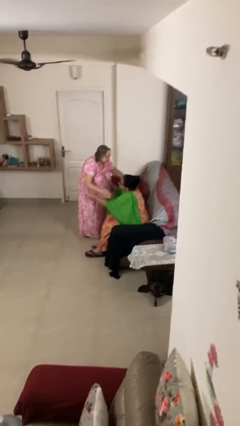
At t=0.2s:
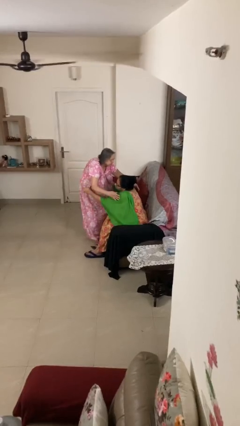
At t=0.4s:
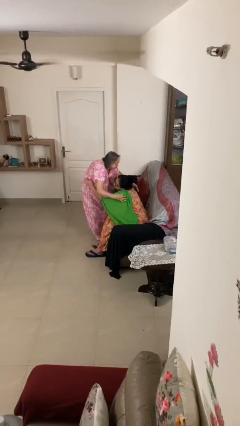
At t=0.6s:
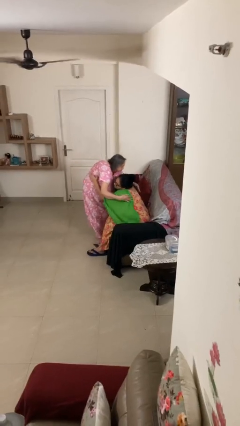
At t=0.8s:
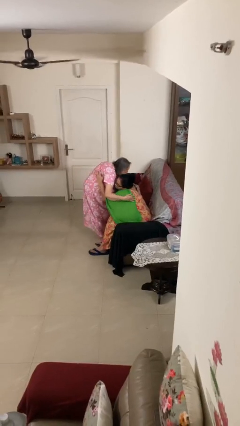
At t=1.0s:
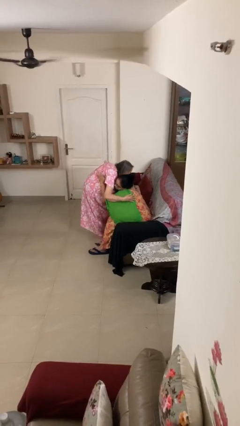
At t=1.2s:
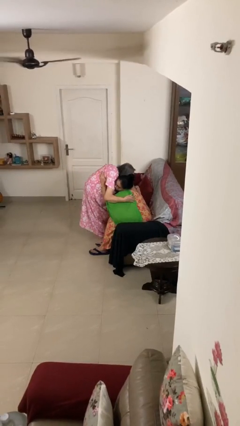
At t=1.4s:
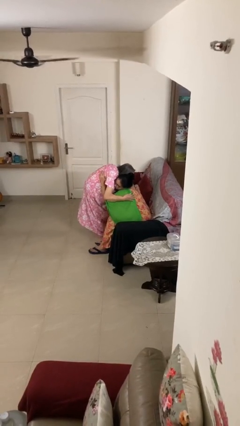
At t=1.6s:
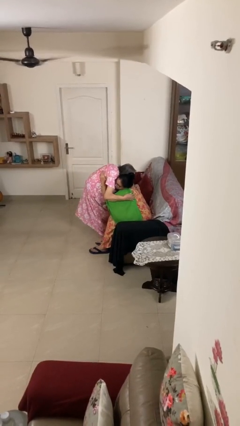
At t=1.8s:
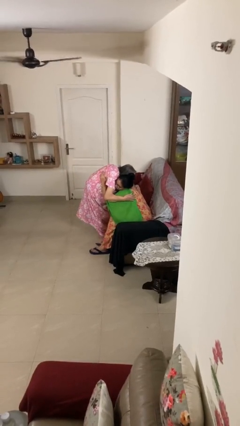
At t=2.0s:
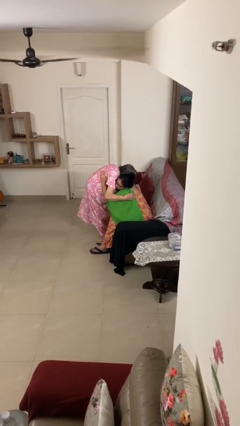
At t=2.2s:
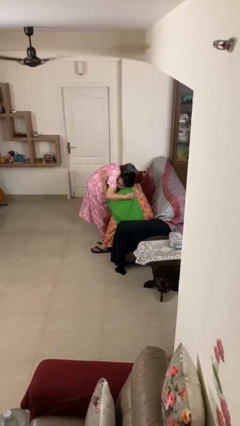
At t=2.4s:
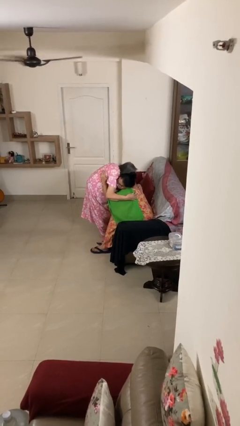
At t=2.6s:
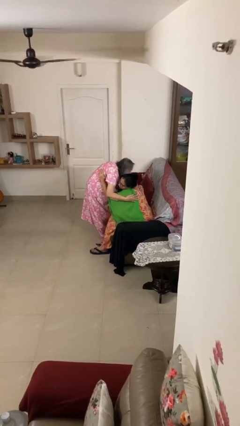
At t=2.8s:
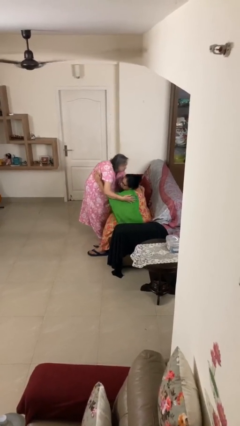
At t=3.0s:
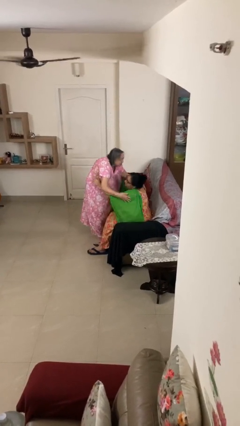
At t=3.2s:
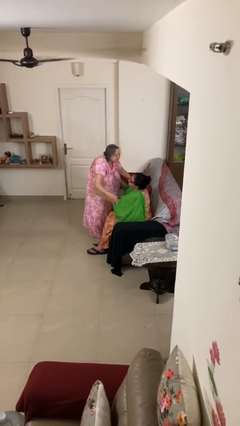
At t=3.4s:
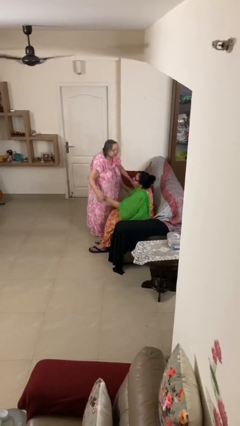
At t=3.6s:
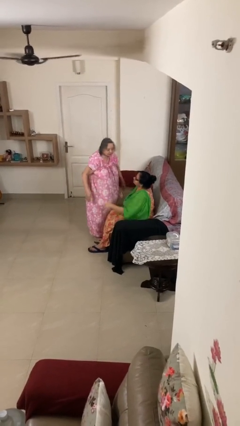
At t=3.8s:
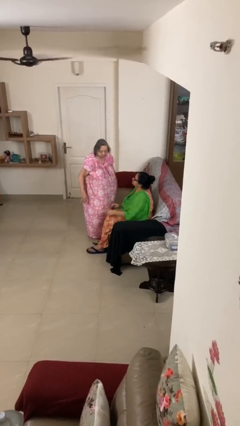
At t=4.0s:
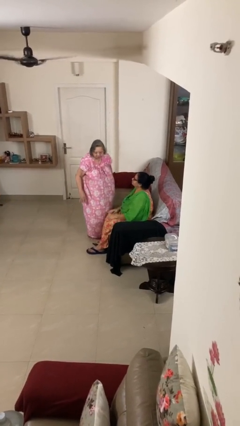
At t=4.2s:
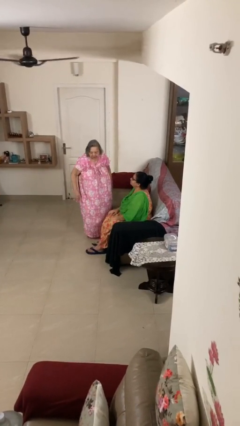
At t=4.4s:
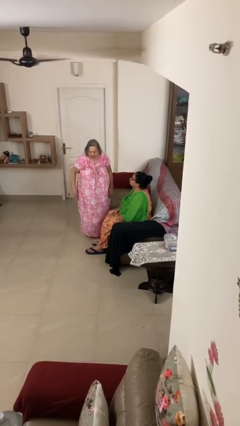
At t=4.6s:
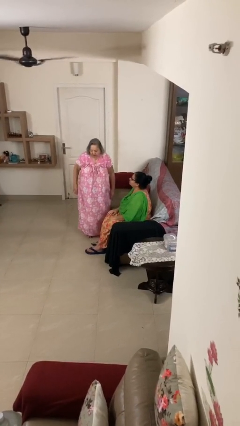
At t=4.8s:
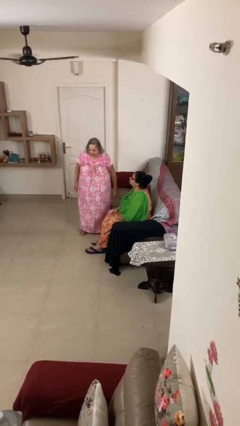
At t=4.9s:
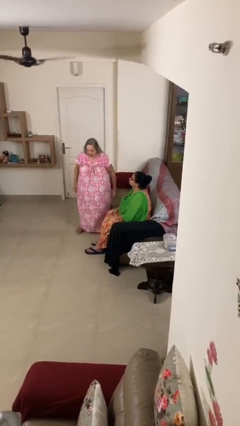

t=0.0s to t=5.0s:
person embraces person

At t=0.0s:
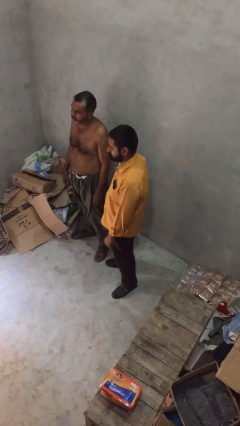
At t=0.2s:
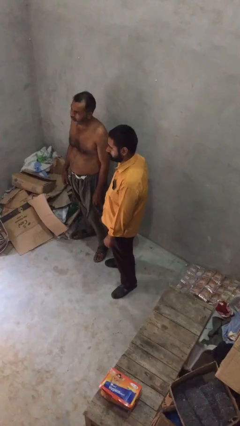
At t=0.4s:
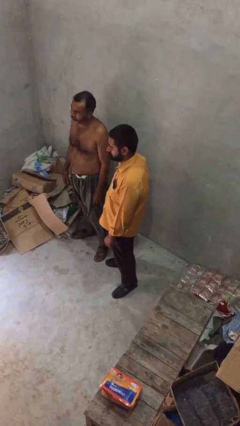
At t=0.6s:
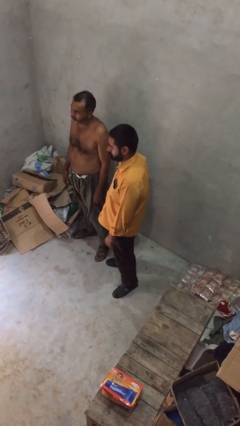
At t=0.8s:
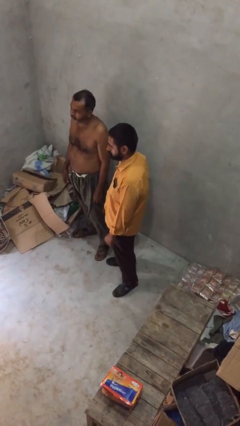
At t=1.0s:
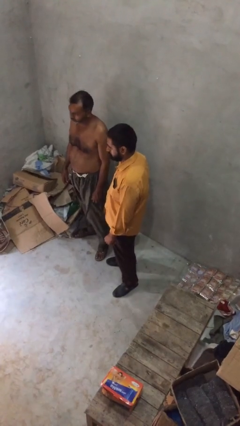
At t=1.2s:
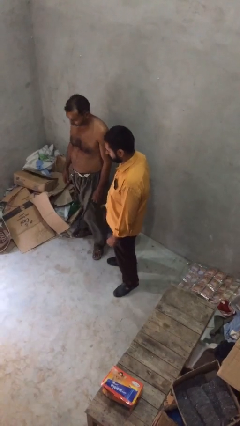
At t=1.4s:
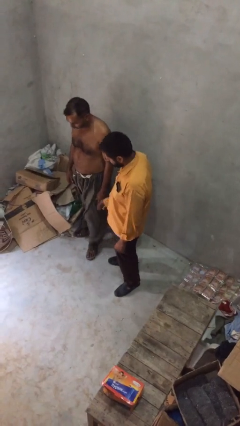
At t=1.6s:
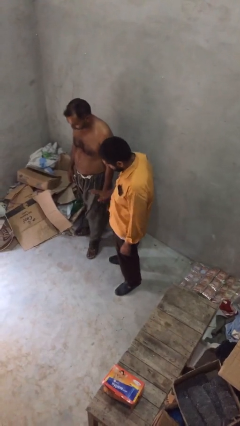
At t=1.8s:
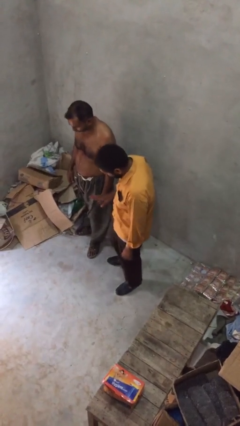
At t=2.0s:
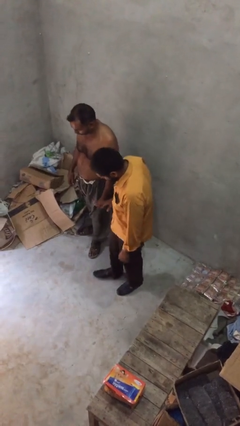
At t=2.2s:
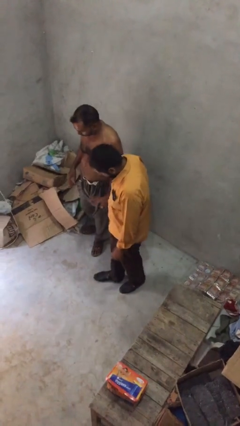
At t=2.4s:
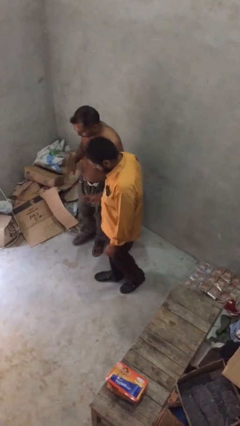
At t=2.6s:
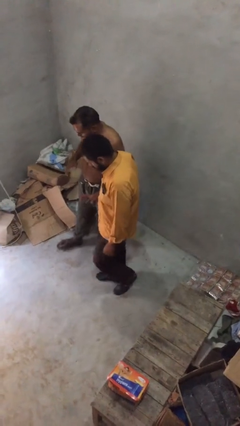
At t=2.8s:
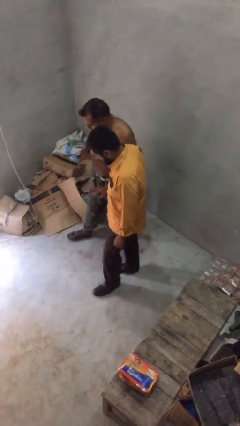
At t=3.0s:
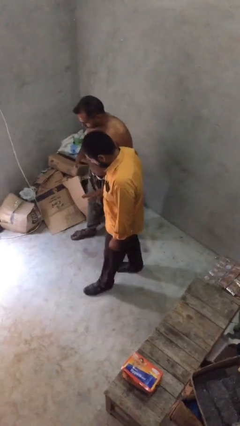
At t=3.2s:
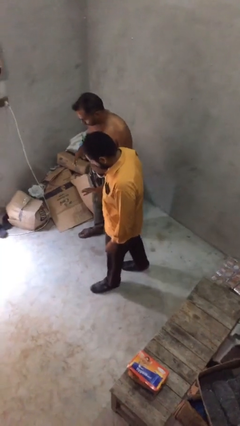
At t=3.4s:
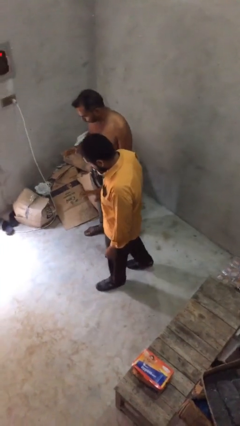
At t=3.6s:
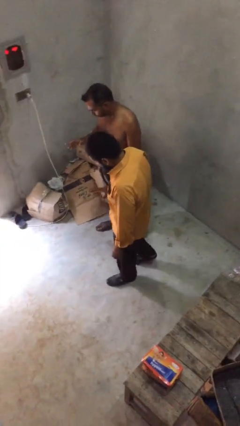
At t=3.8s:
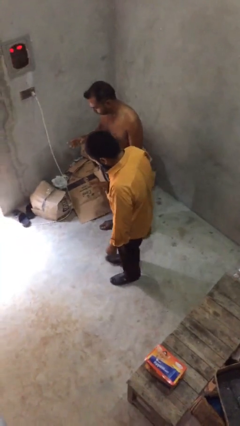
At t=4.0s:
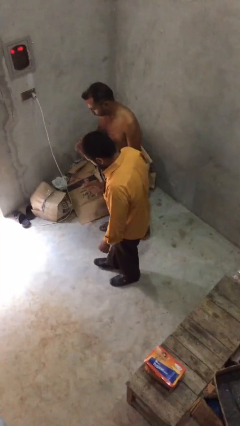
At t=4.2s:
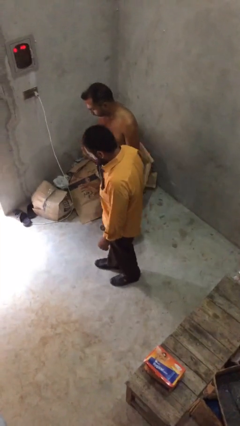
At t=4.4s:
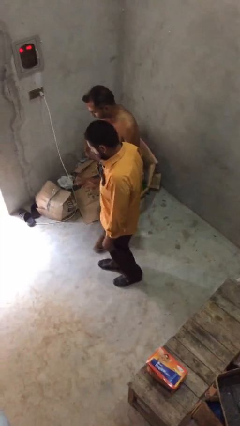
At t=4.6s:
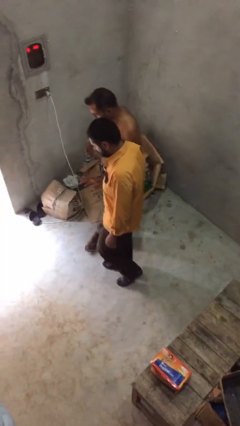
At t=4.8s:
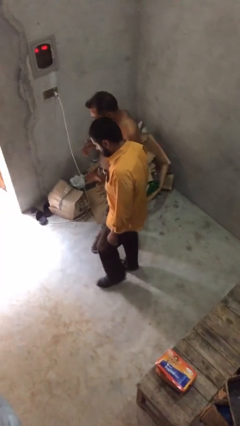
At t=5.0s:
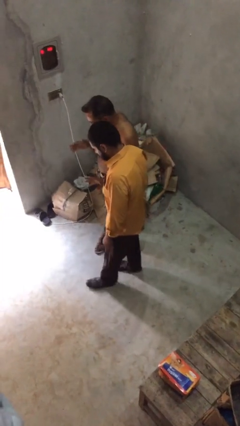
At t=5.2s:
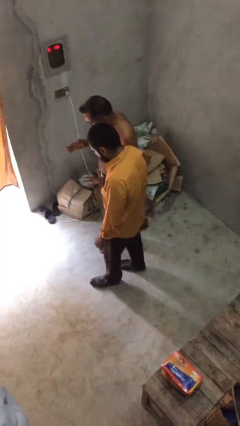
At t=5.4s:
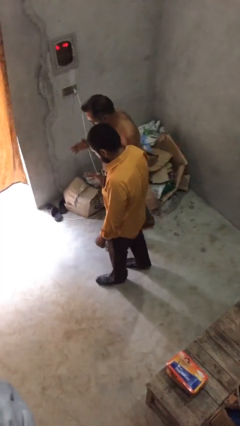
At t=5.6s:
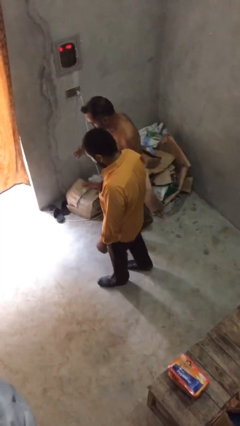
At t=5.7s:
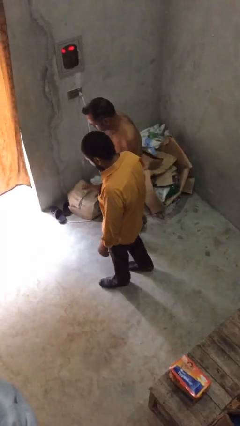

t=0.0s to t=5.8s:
person talks to person

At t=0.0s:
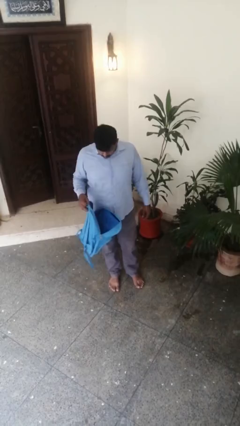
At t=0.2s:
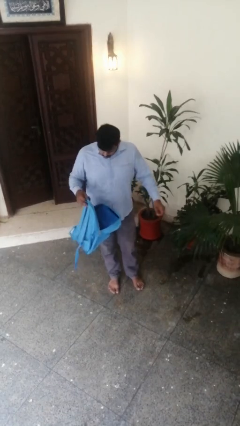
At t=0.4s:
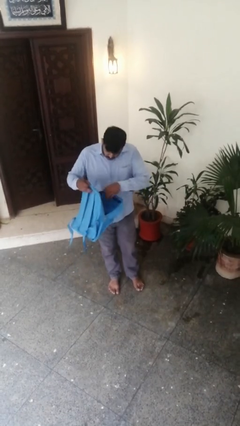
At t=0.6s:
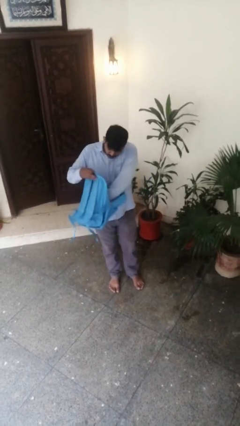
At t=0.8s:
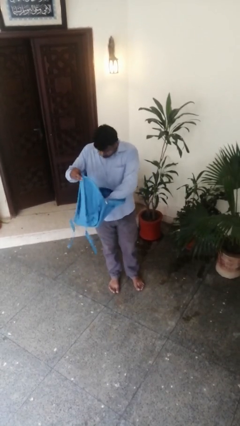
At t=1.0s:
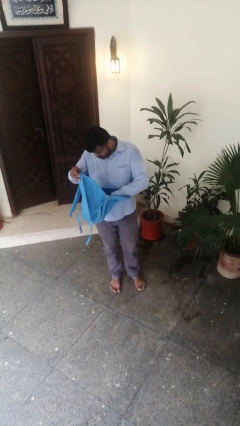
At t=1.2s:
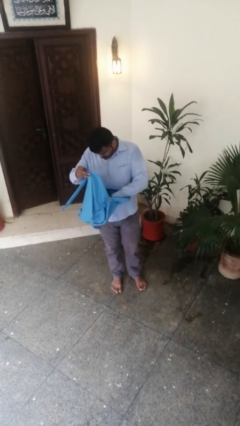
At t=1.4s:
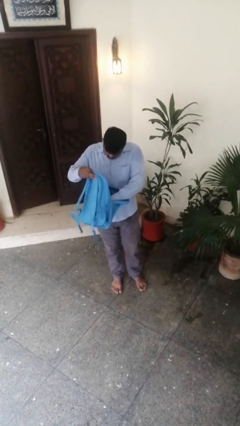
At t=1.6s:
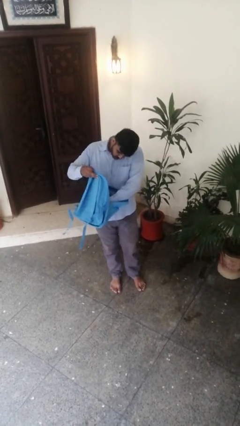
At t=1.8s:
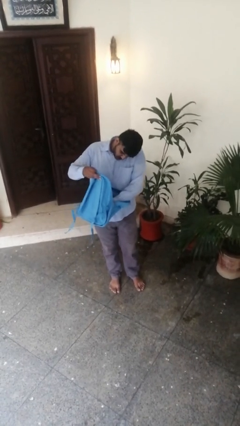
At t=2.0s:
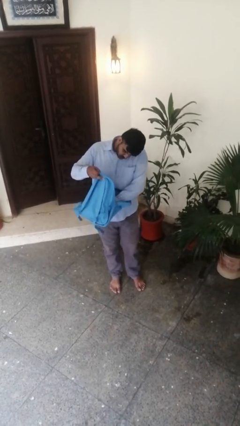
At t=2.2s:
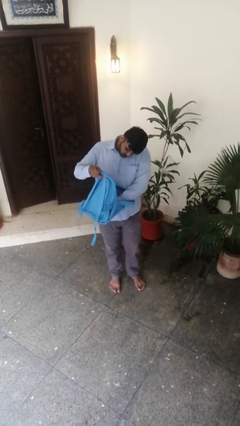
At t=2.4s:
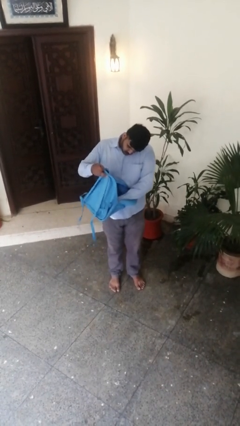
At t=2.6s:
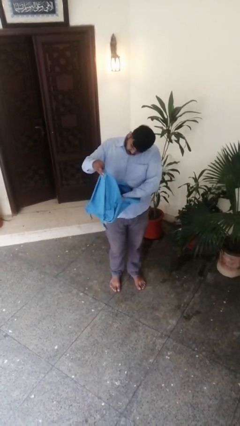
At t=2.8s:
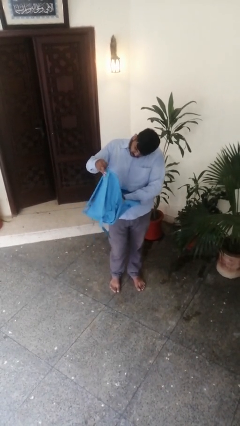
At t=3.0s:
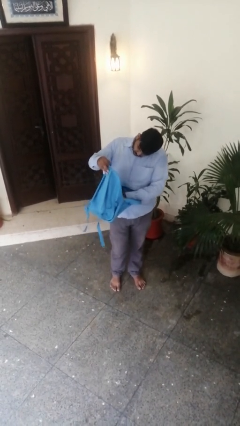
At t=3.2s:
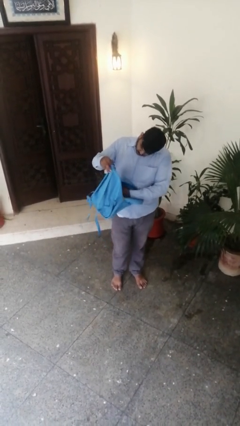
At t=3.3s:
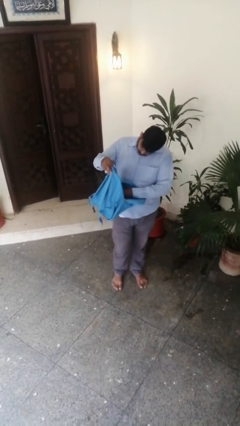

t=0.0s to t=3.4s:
person searches in backpack

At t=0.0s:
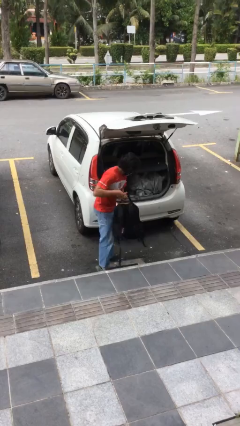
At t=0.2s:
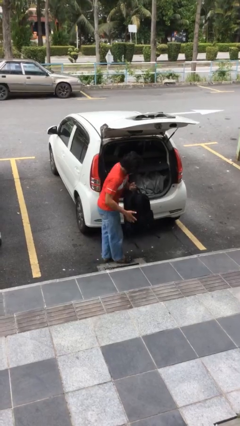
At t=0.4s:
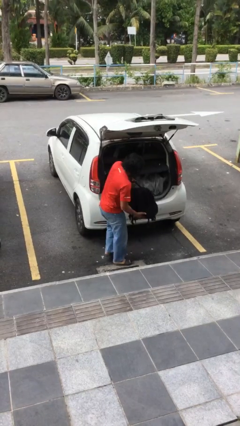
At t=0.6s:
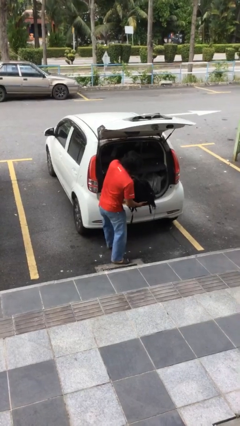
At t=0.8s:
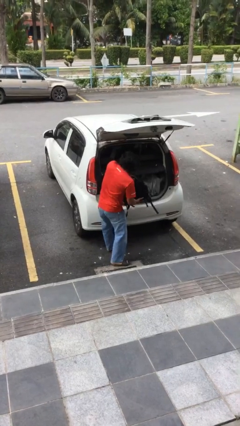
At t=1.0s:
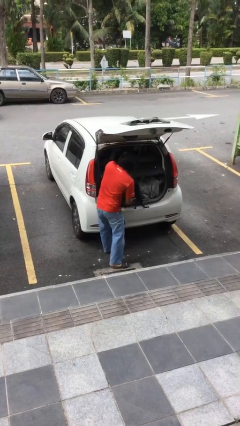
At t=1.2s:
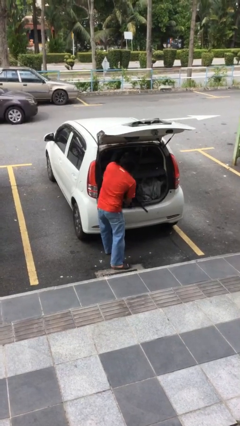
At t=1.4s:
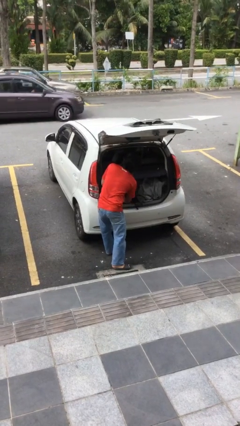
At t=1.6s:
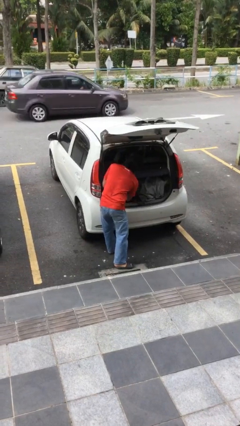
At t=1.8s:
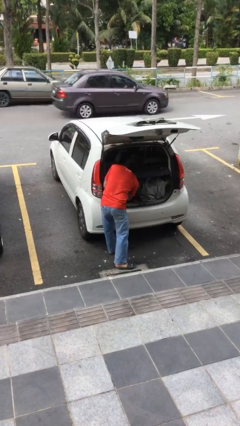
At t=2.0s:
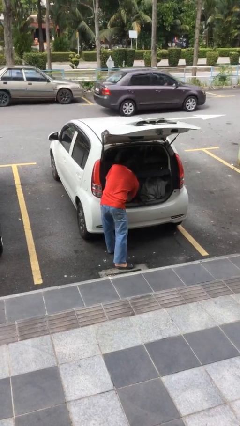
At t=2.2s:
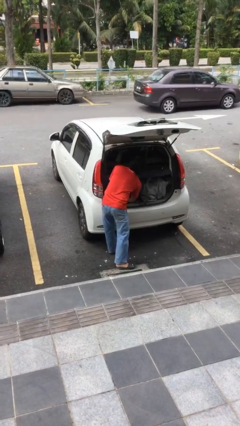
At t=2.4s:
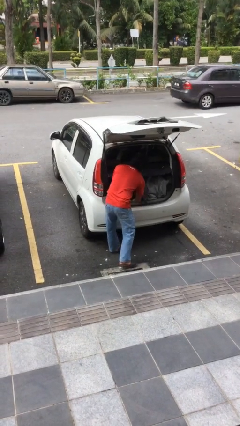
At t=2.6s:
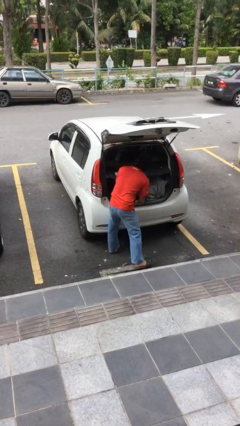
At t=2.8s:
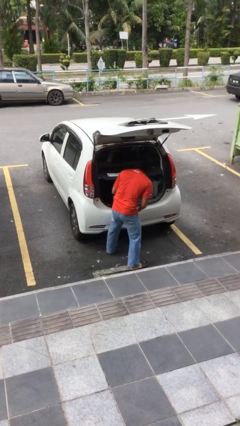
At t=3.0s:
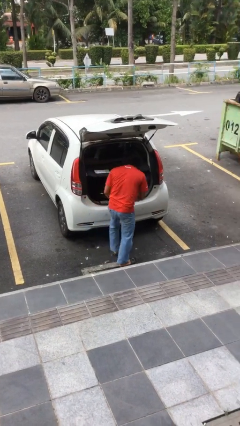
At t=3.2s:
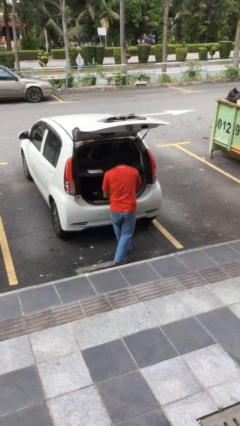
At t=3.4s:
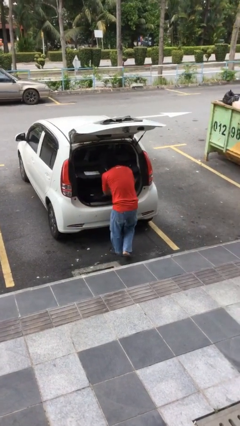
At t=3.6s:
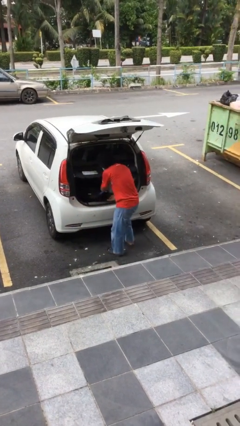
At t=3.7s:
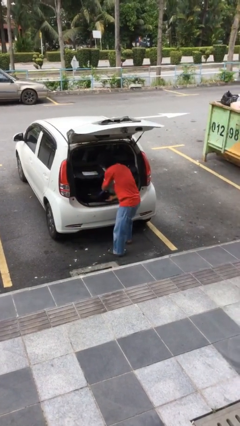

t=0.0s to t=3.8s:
person loads car
